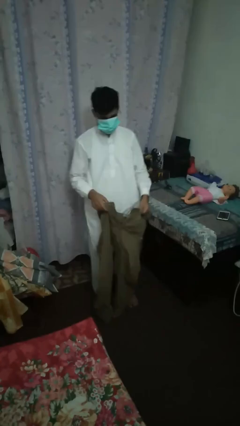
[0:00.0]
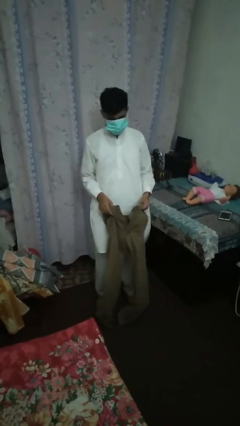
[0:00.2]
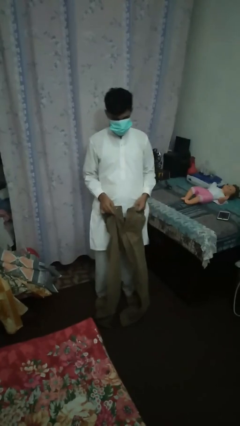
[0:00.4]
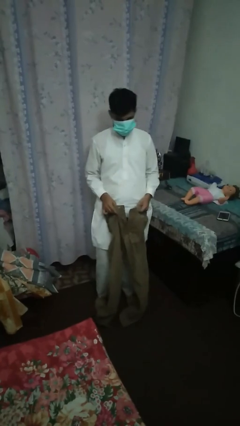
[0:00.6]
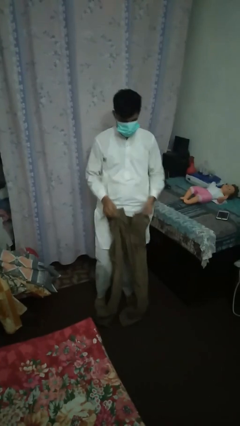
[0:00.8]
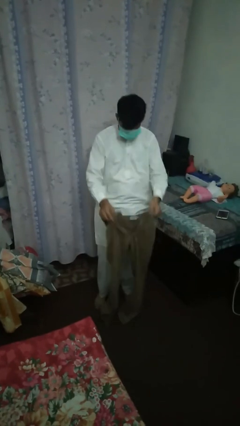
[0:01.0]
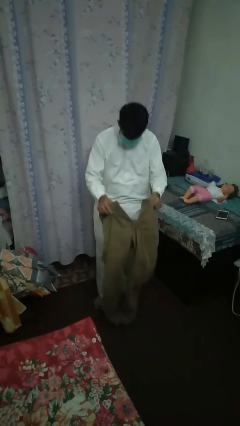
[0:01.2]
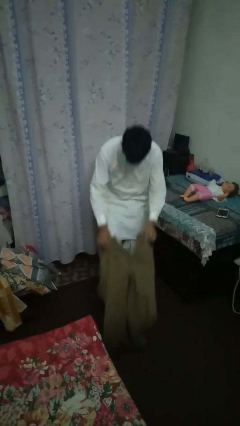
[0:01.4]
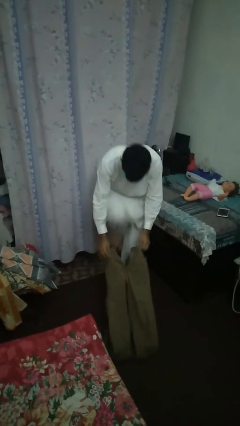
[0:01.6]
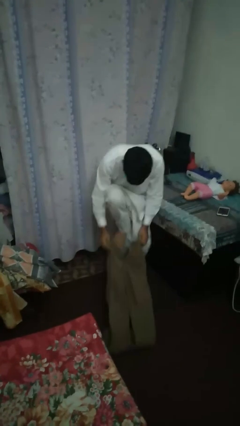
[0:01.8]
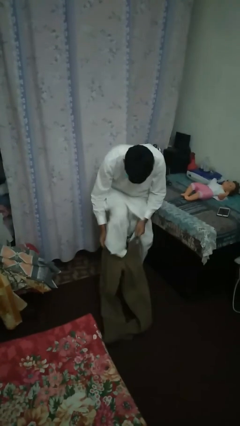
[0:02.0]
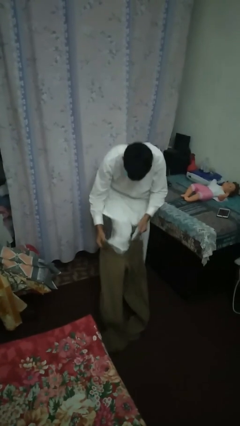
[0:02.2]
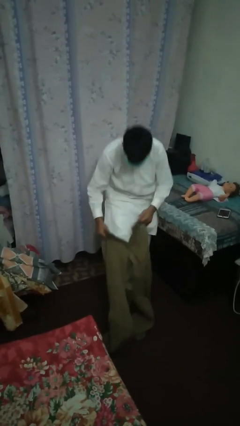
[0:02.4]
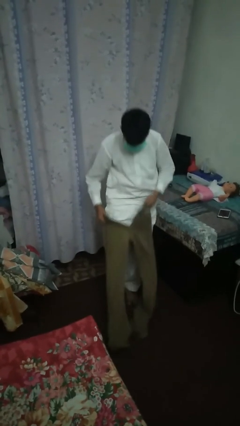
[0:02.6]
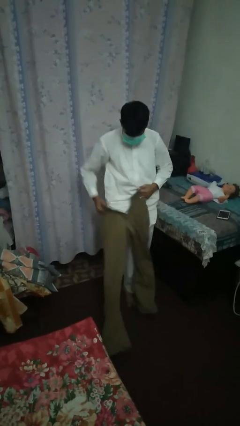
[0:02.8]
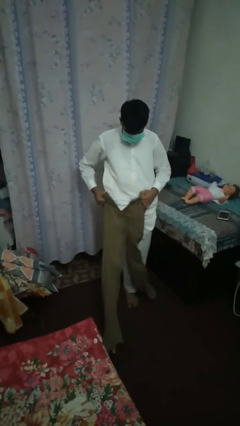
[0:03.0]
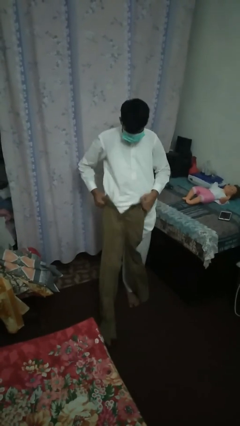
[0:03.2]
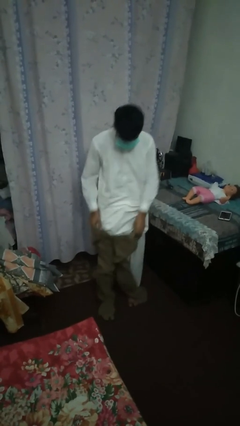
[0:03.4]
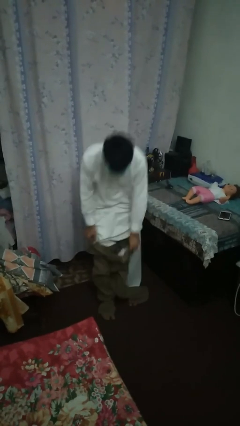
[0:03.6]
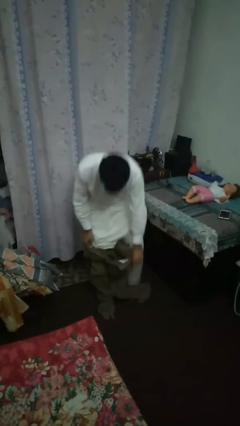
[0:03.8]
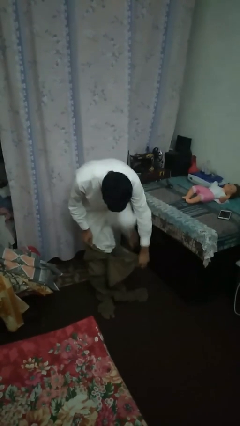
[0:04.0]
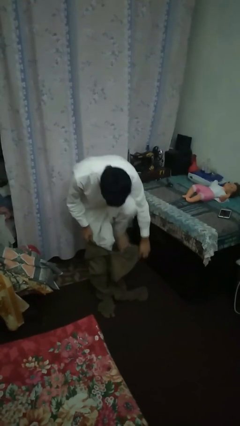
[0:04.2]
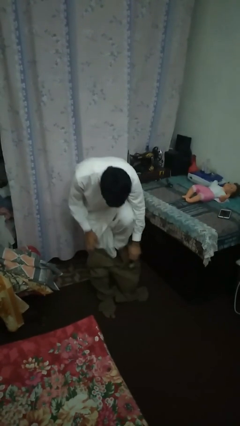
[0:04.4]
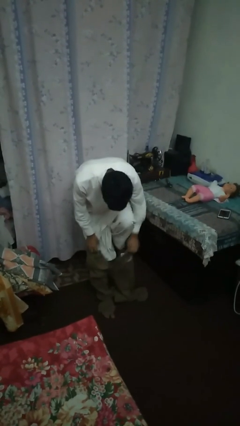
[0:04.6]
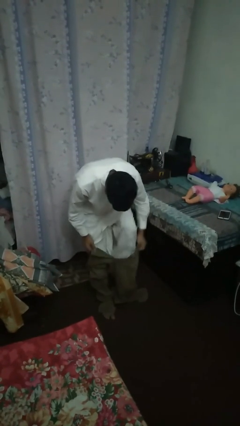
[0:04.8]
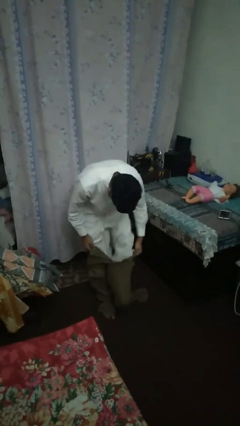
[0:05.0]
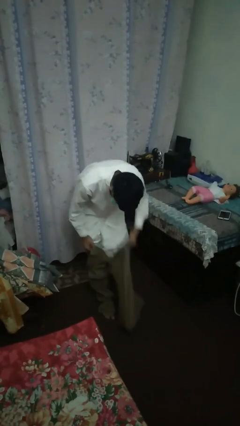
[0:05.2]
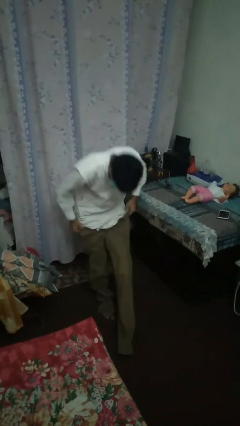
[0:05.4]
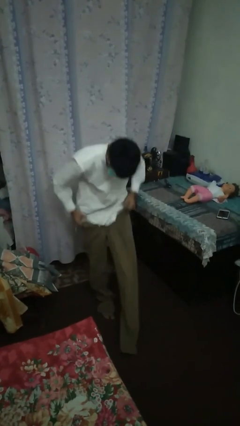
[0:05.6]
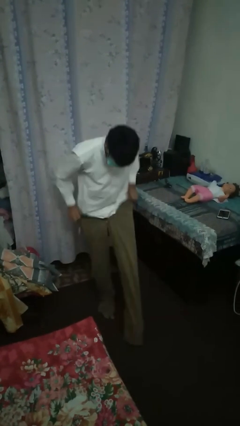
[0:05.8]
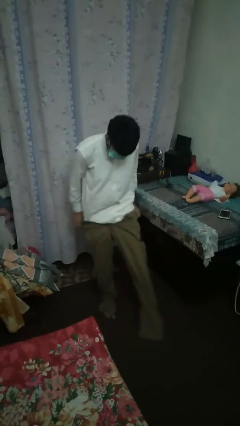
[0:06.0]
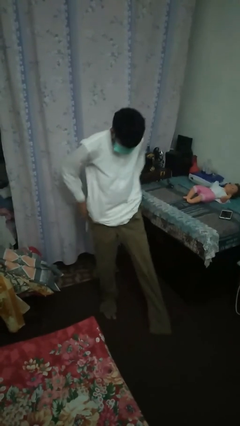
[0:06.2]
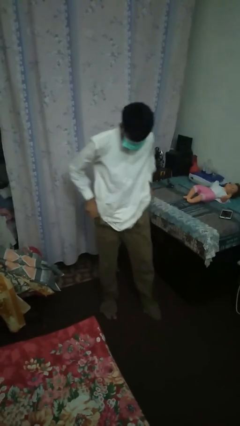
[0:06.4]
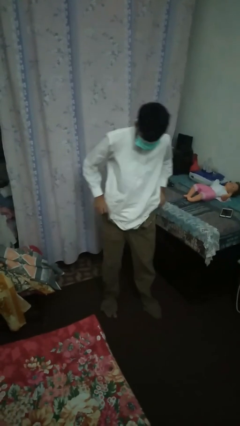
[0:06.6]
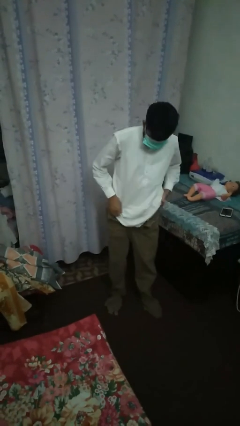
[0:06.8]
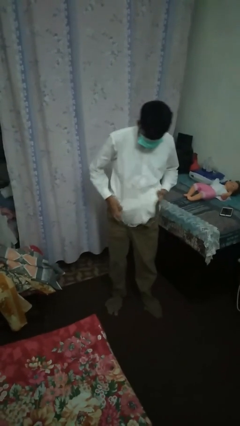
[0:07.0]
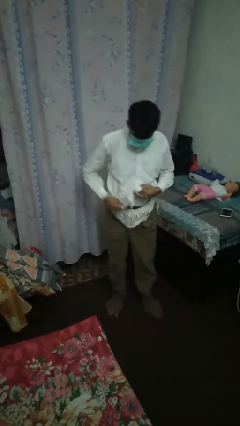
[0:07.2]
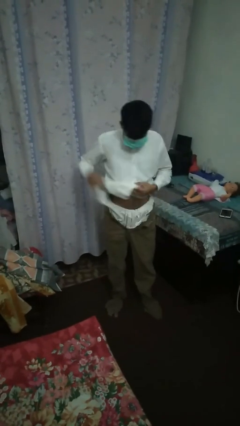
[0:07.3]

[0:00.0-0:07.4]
person puts on pants

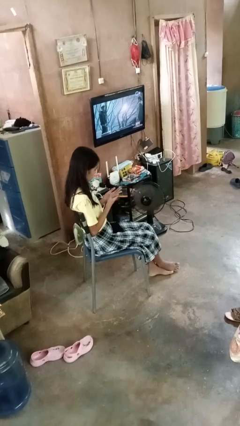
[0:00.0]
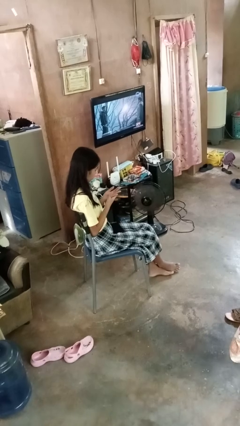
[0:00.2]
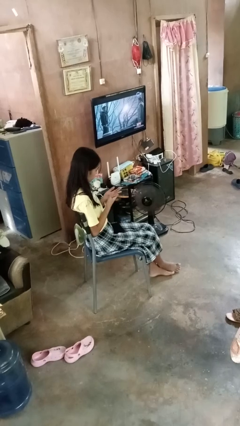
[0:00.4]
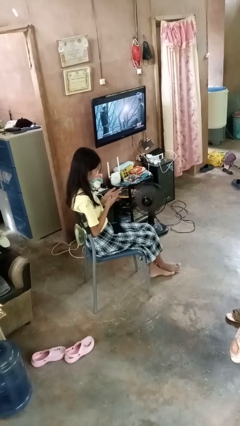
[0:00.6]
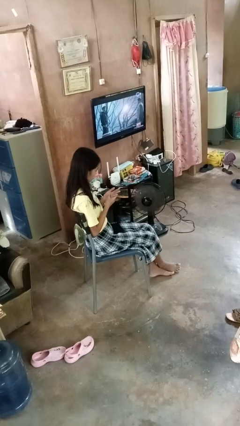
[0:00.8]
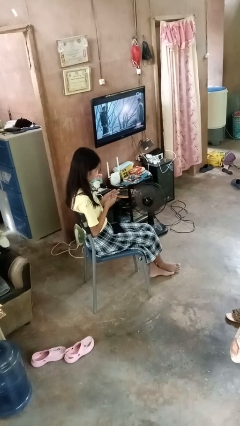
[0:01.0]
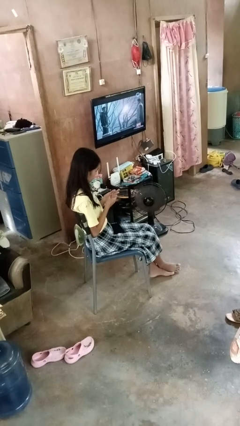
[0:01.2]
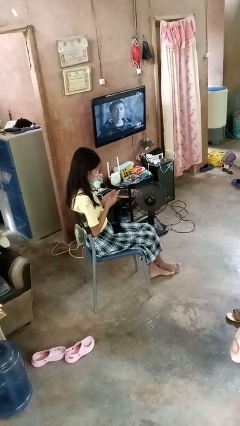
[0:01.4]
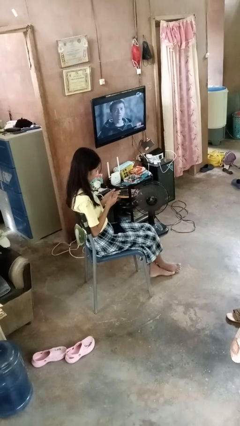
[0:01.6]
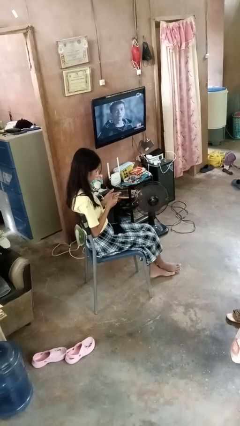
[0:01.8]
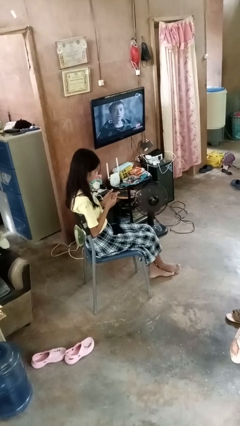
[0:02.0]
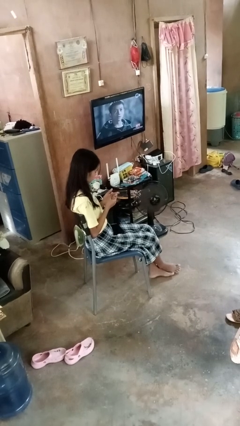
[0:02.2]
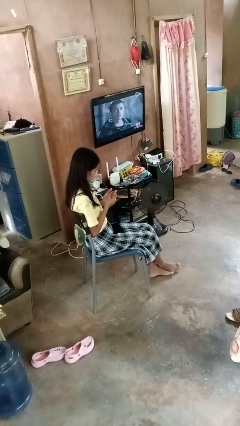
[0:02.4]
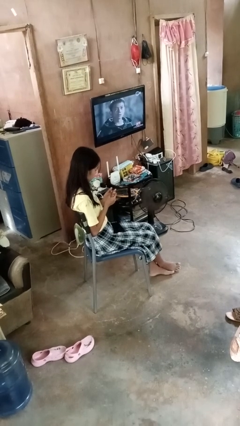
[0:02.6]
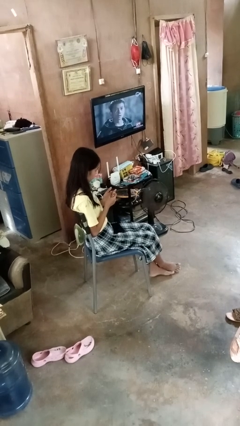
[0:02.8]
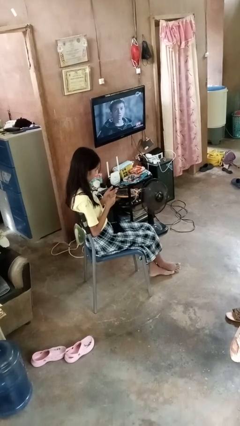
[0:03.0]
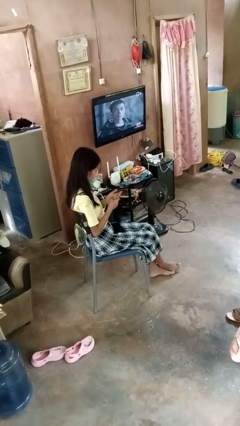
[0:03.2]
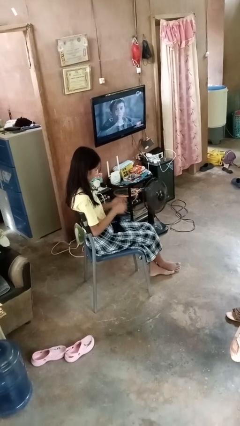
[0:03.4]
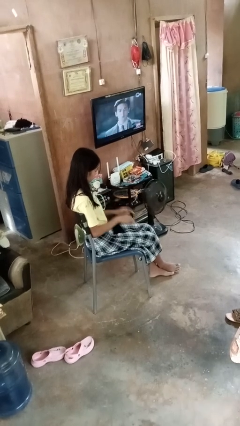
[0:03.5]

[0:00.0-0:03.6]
person looks at hands in lap

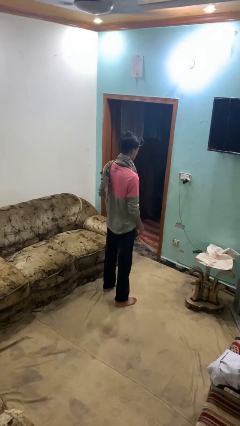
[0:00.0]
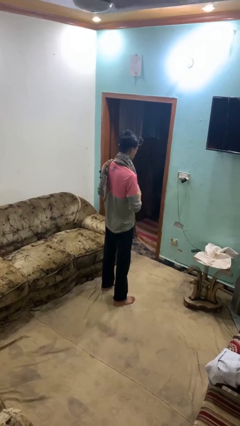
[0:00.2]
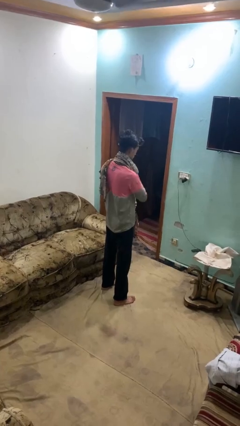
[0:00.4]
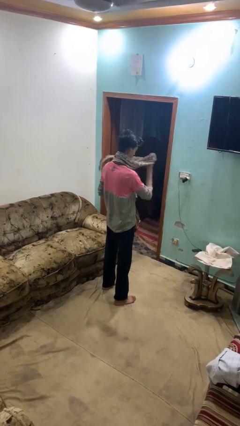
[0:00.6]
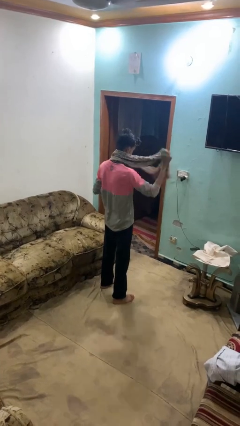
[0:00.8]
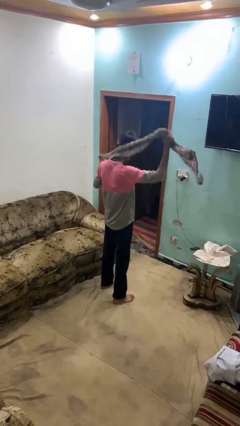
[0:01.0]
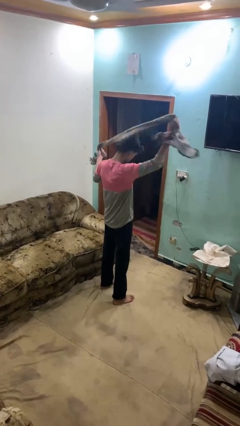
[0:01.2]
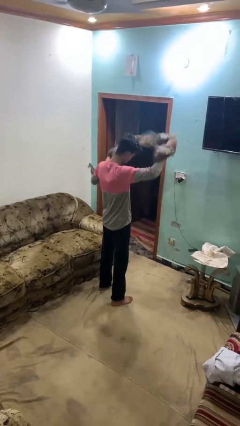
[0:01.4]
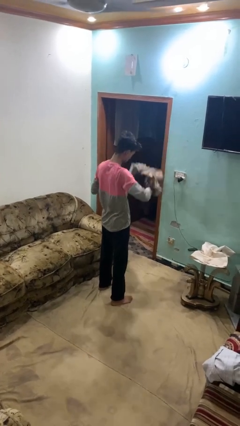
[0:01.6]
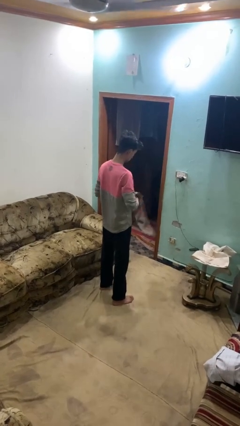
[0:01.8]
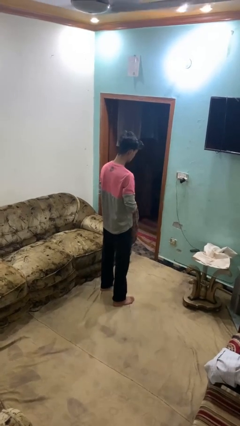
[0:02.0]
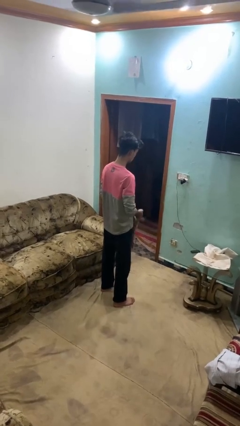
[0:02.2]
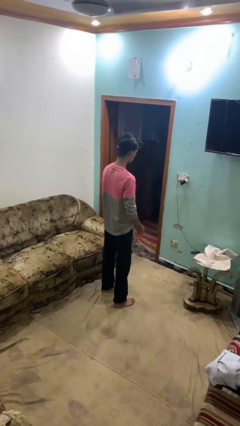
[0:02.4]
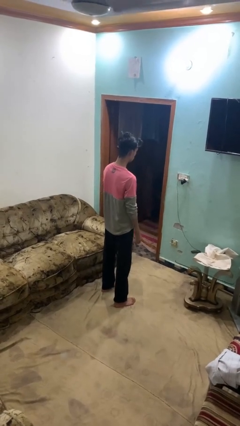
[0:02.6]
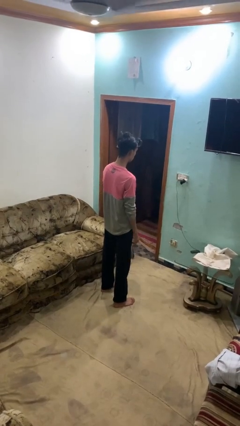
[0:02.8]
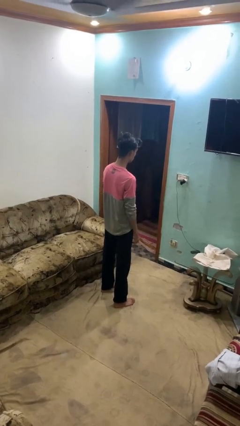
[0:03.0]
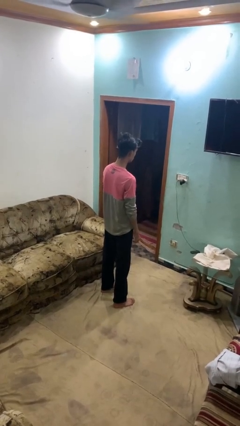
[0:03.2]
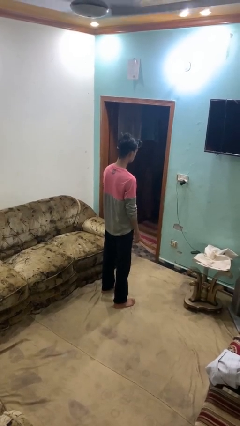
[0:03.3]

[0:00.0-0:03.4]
person takes off scarf

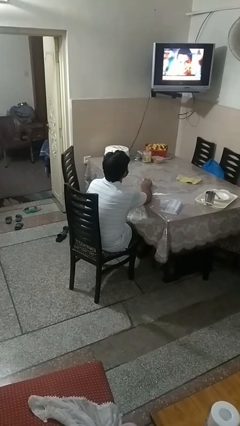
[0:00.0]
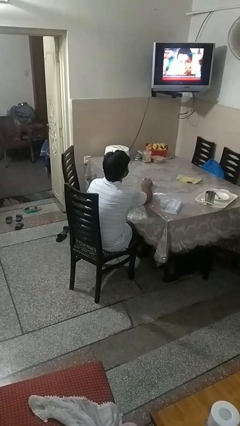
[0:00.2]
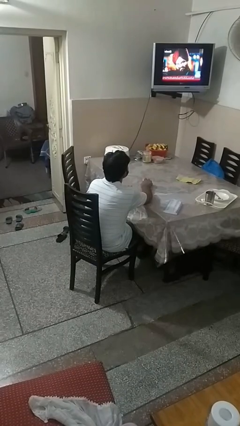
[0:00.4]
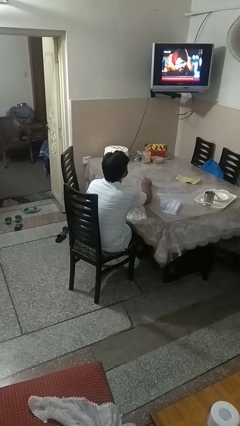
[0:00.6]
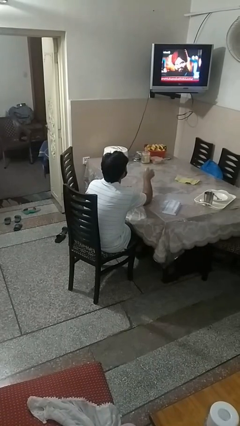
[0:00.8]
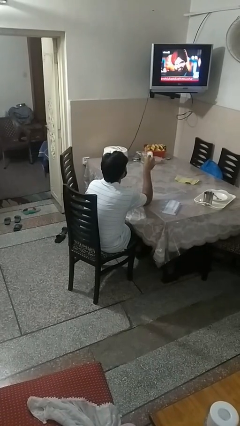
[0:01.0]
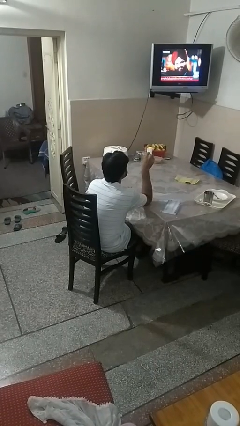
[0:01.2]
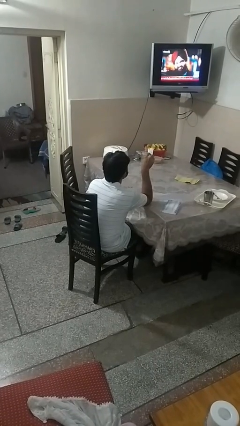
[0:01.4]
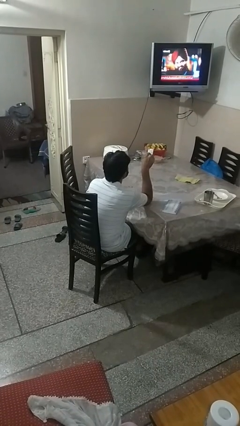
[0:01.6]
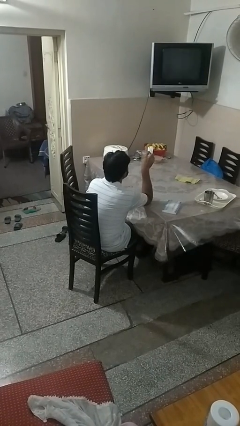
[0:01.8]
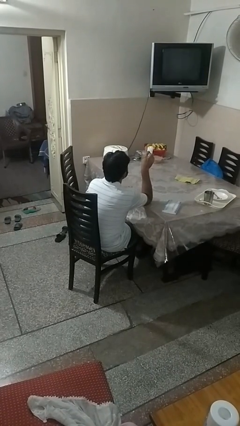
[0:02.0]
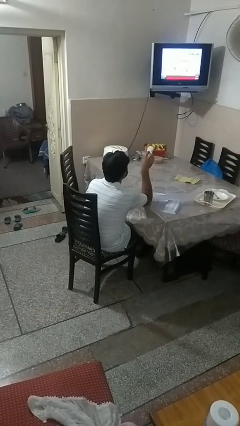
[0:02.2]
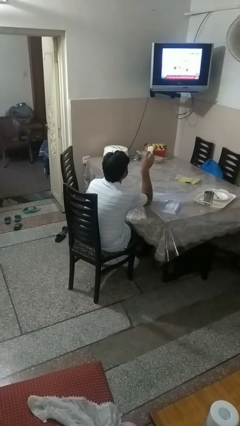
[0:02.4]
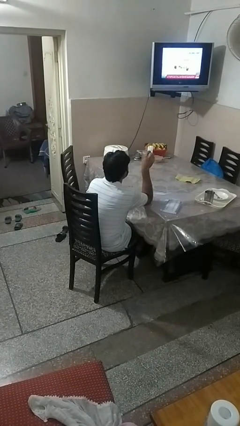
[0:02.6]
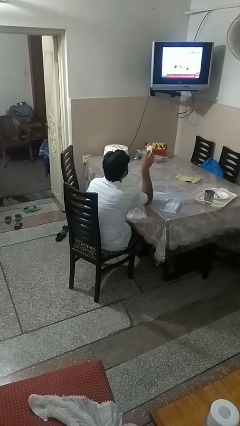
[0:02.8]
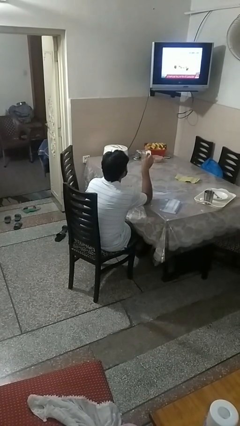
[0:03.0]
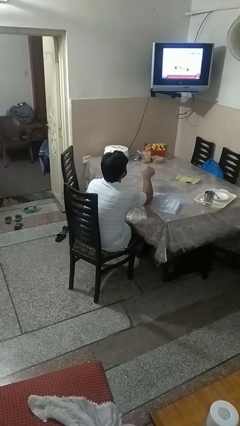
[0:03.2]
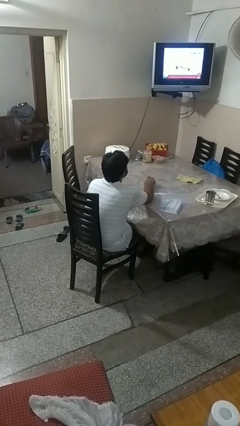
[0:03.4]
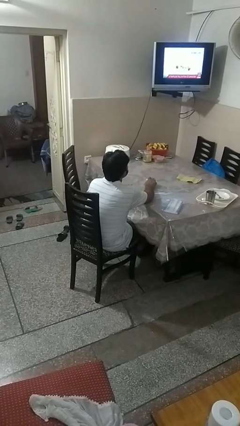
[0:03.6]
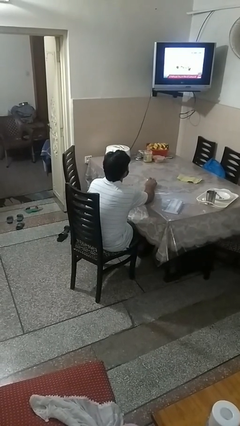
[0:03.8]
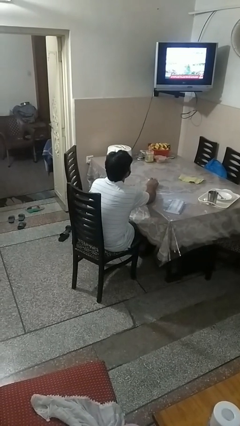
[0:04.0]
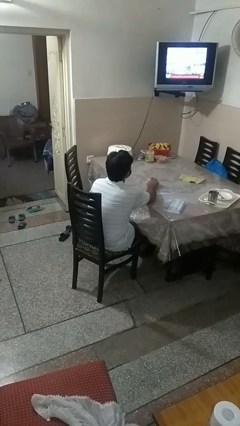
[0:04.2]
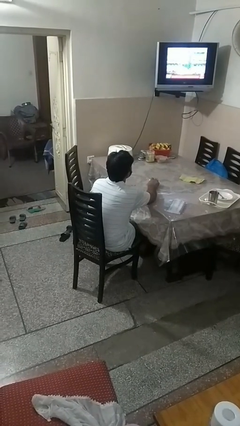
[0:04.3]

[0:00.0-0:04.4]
person uses television remote
